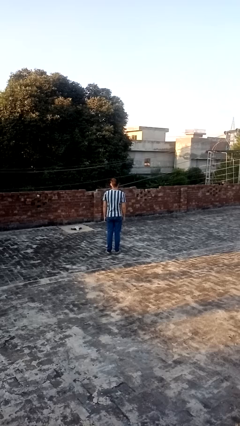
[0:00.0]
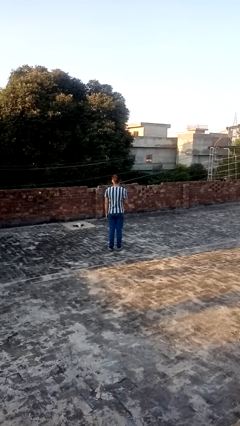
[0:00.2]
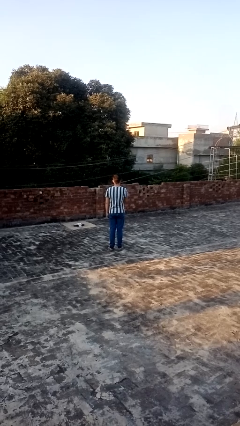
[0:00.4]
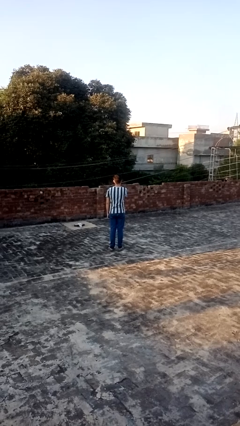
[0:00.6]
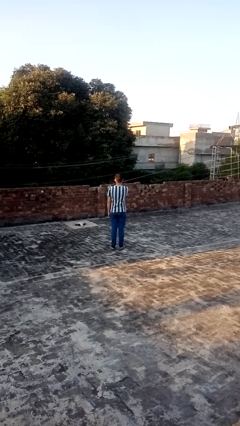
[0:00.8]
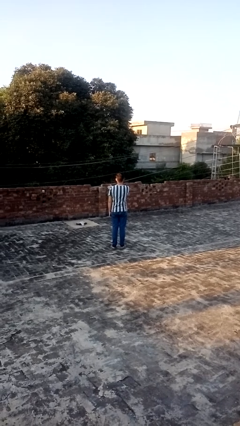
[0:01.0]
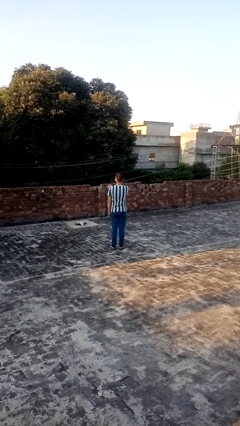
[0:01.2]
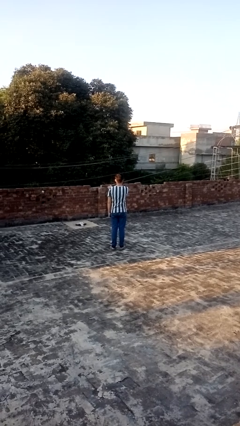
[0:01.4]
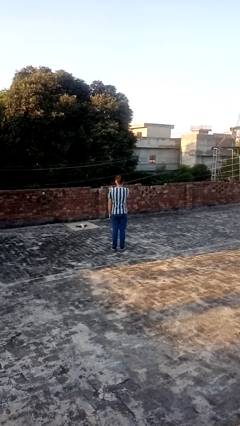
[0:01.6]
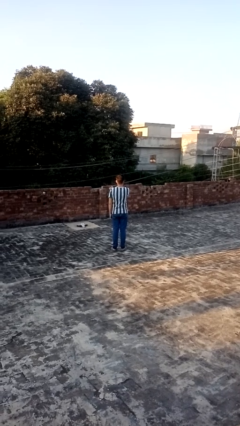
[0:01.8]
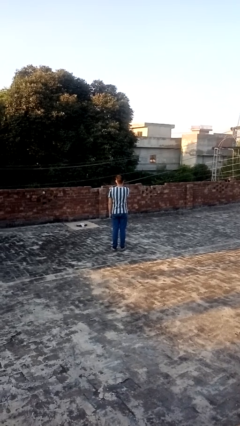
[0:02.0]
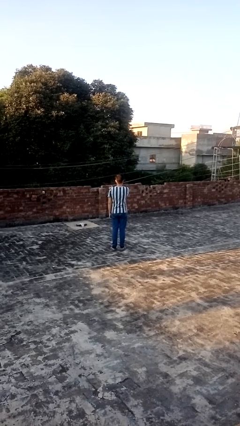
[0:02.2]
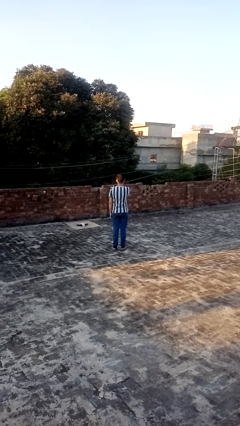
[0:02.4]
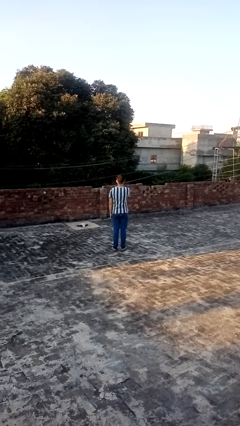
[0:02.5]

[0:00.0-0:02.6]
person gestures swipe left

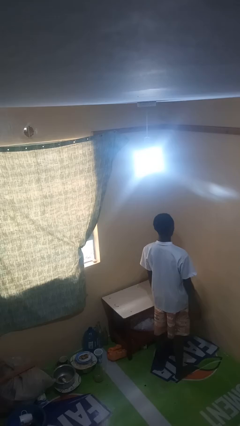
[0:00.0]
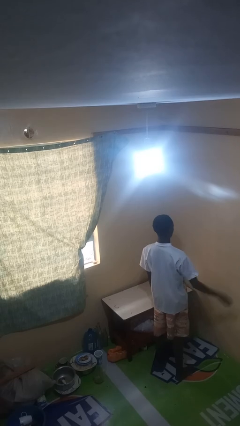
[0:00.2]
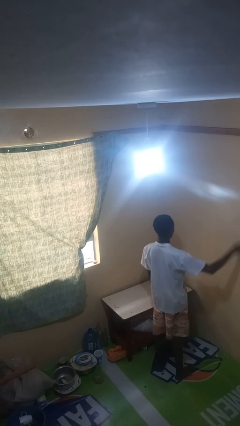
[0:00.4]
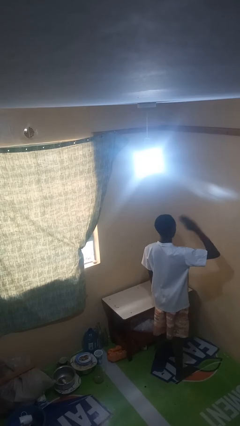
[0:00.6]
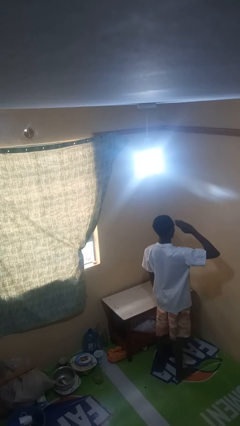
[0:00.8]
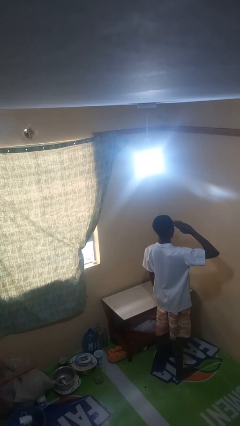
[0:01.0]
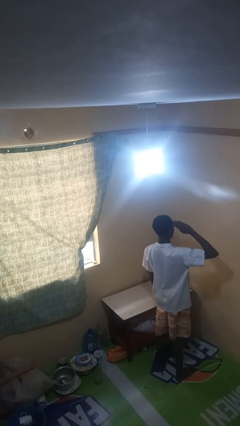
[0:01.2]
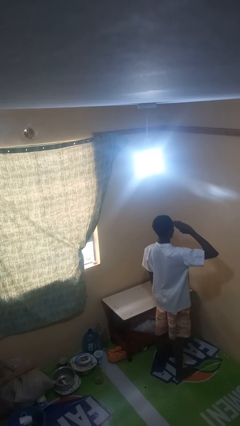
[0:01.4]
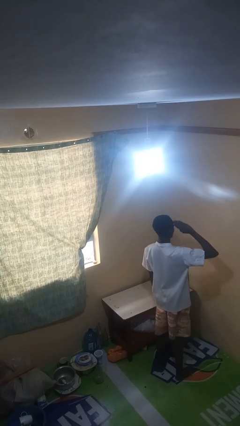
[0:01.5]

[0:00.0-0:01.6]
person salutes

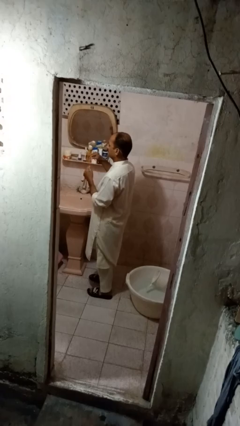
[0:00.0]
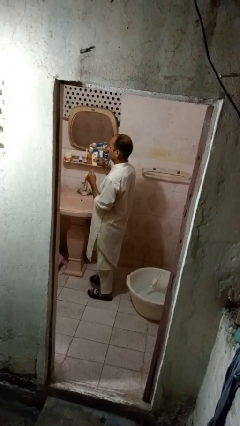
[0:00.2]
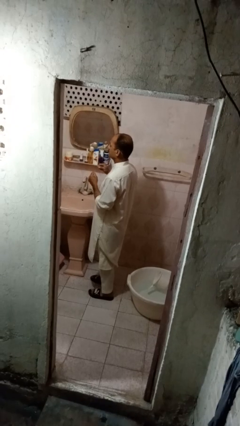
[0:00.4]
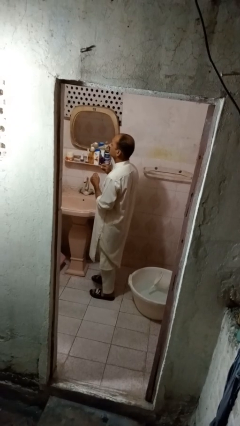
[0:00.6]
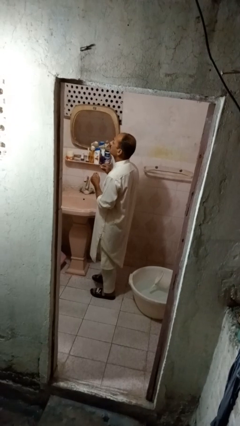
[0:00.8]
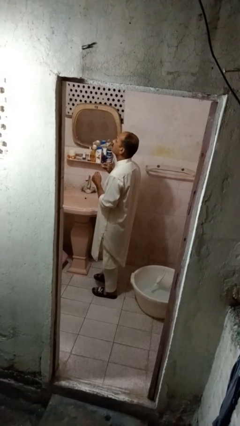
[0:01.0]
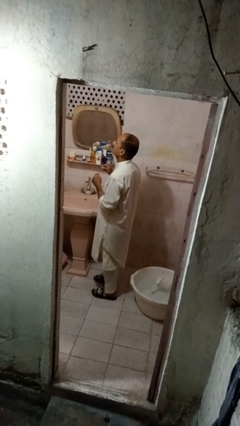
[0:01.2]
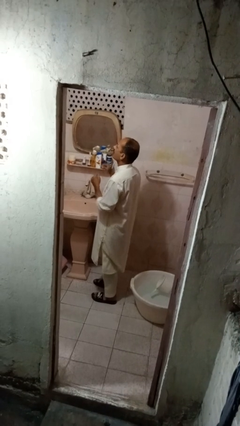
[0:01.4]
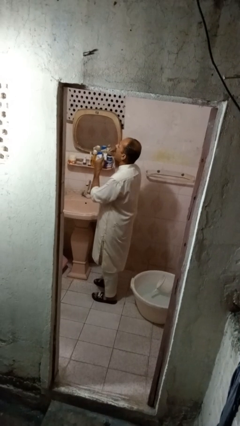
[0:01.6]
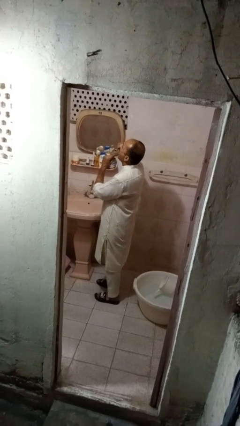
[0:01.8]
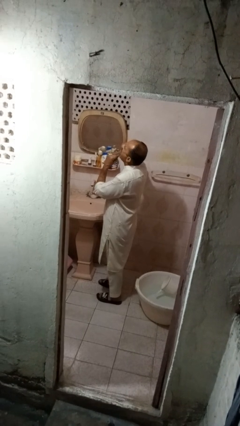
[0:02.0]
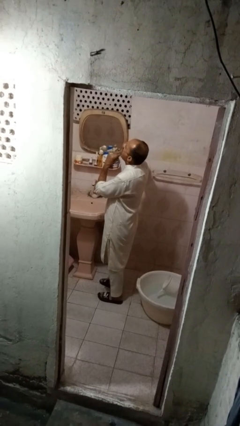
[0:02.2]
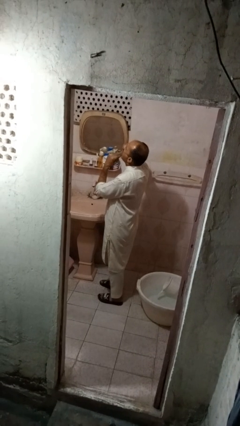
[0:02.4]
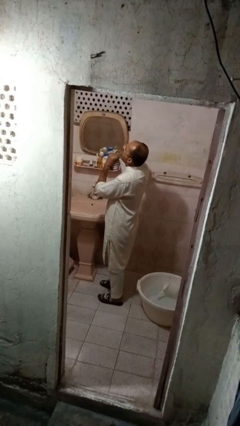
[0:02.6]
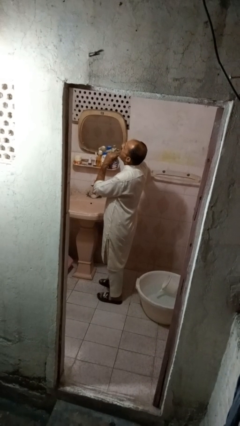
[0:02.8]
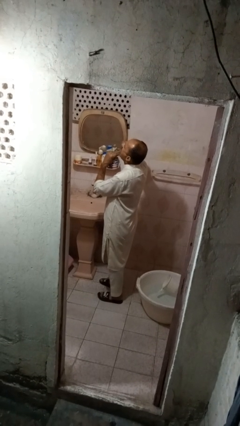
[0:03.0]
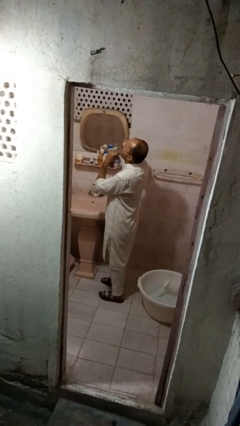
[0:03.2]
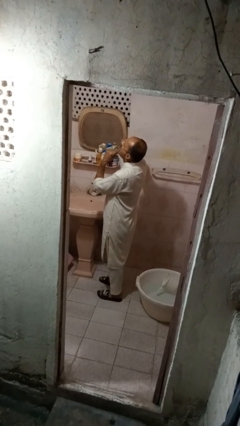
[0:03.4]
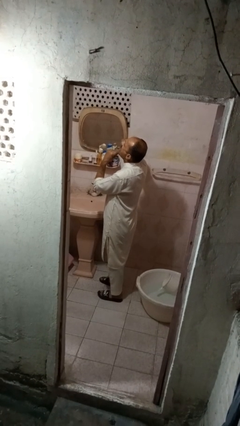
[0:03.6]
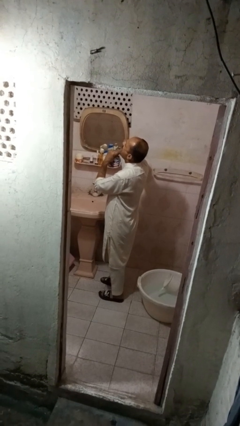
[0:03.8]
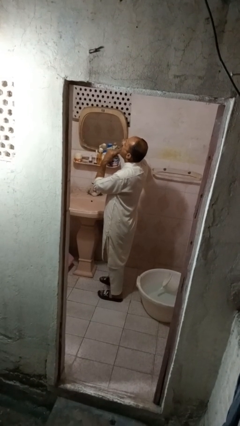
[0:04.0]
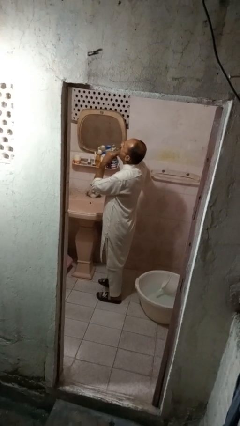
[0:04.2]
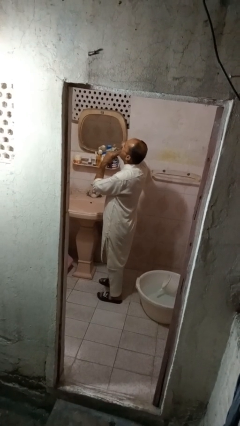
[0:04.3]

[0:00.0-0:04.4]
person flosses

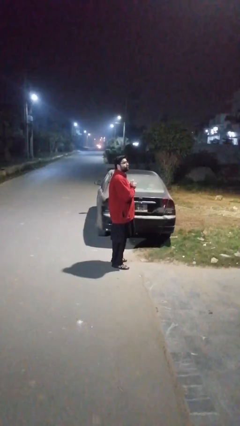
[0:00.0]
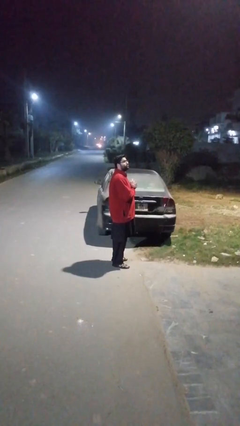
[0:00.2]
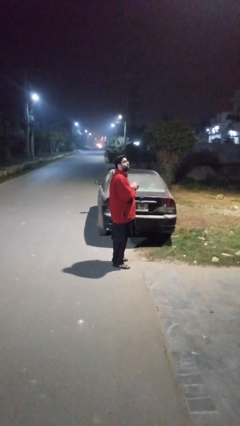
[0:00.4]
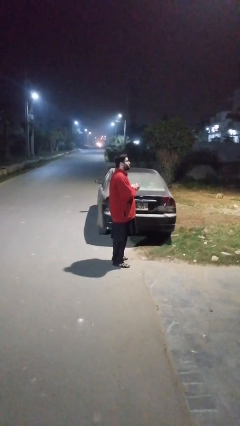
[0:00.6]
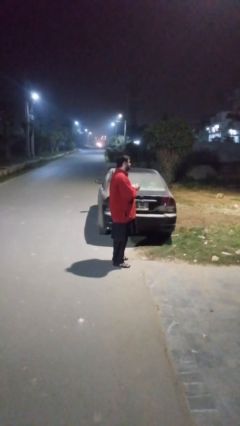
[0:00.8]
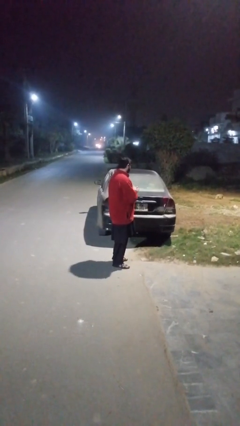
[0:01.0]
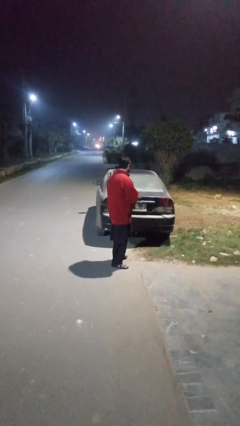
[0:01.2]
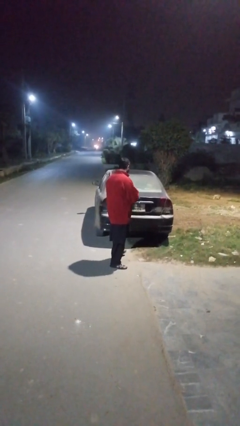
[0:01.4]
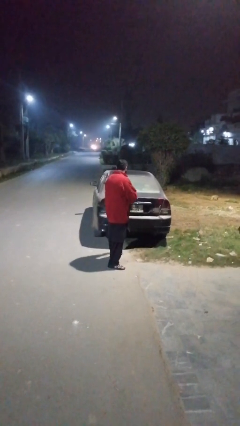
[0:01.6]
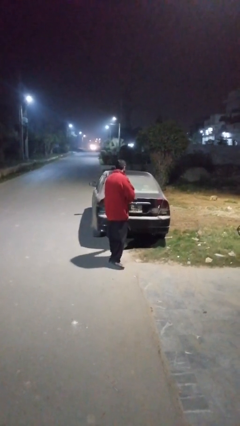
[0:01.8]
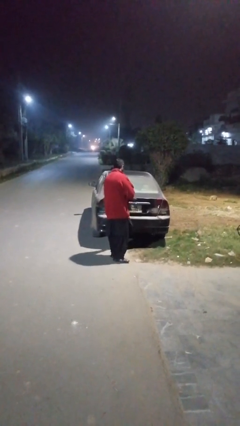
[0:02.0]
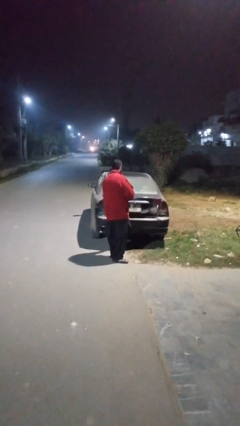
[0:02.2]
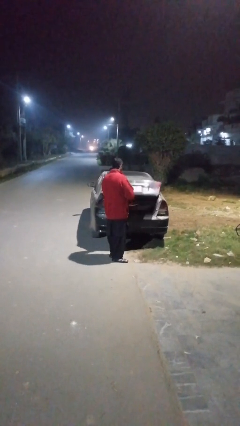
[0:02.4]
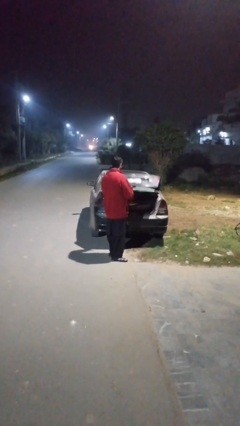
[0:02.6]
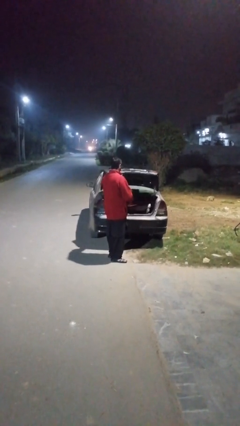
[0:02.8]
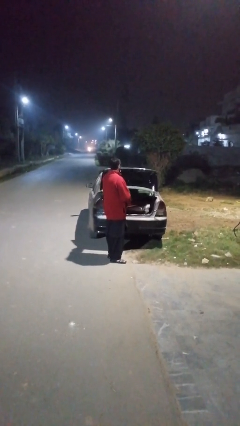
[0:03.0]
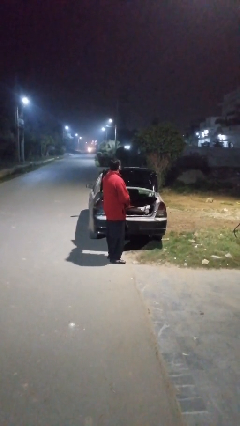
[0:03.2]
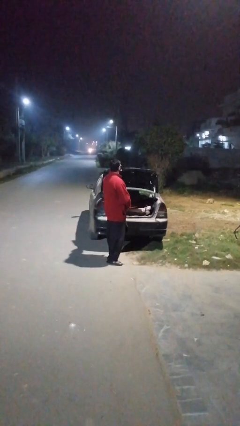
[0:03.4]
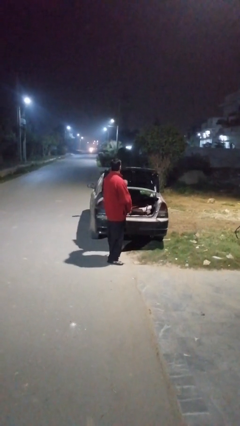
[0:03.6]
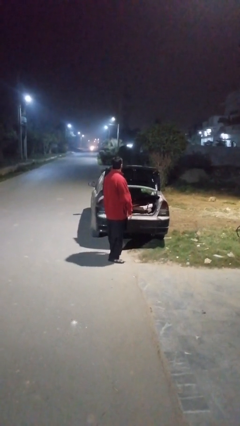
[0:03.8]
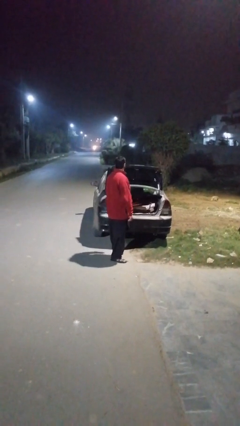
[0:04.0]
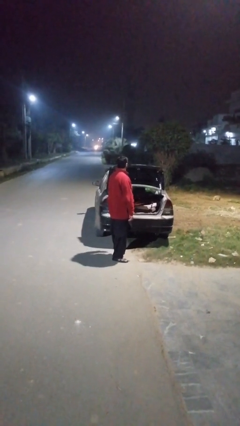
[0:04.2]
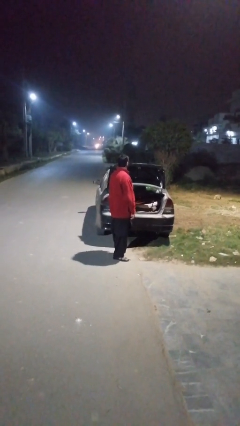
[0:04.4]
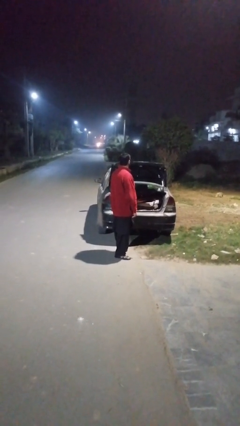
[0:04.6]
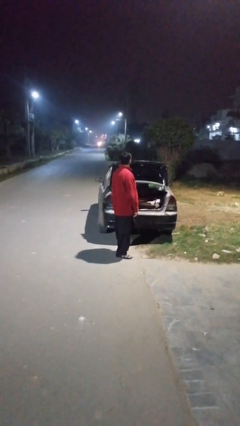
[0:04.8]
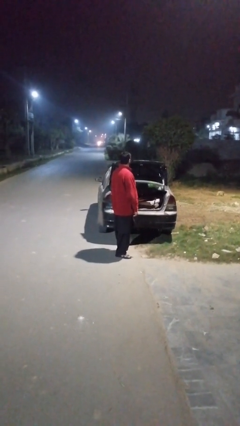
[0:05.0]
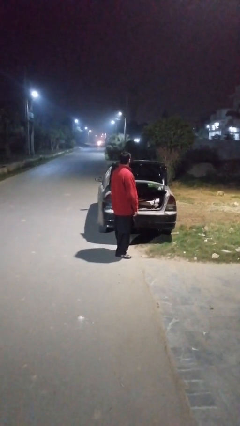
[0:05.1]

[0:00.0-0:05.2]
person opens car trunk

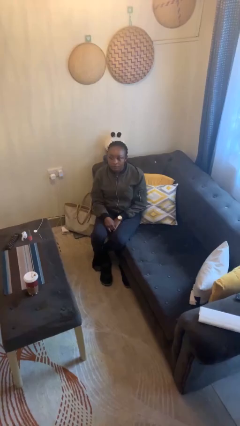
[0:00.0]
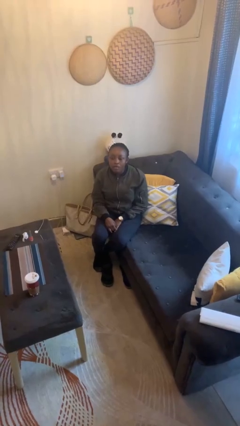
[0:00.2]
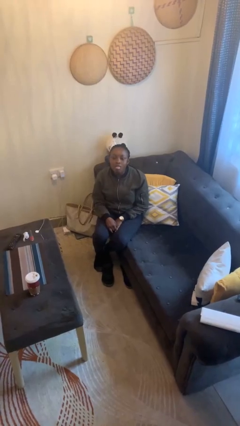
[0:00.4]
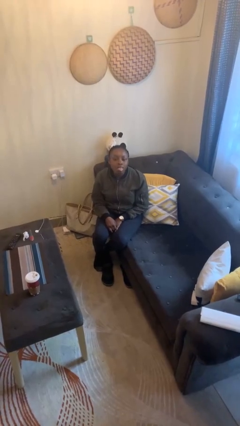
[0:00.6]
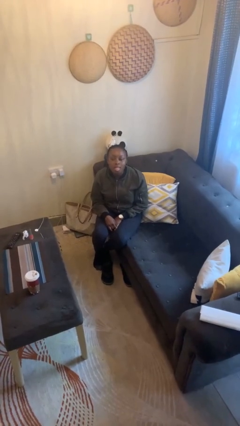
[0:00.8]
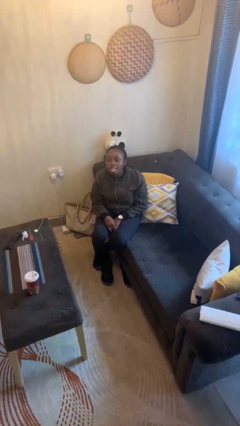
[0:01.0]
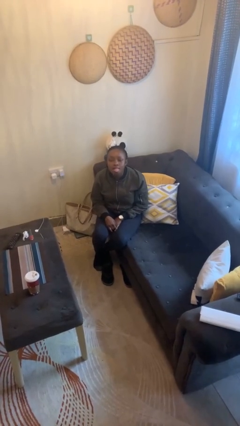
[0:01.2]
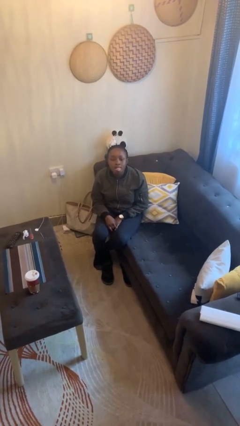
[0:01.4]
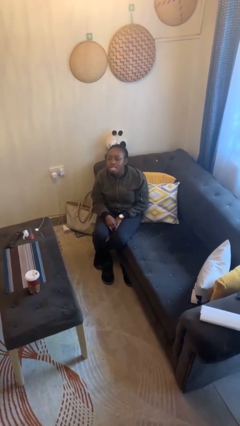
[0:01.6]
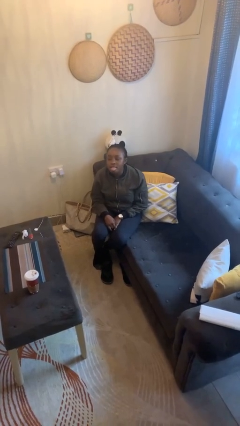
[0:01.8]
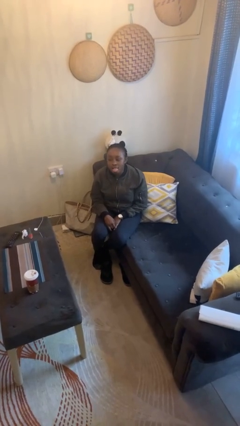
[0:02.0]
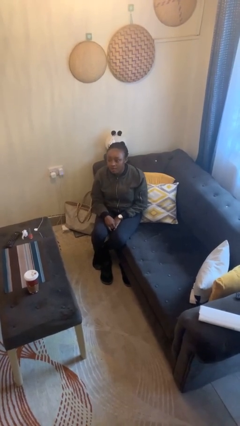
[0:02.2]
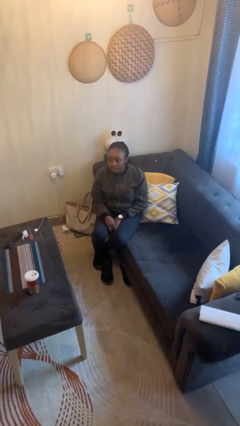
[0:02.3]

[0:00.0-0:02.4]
person sticks out tongue

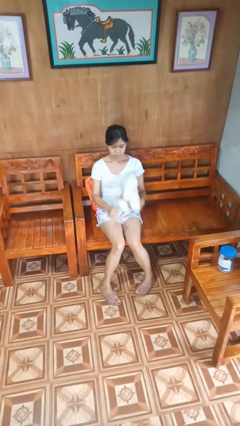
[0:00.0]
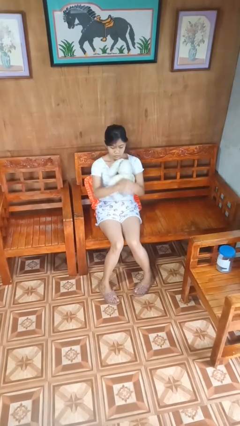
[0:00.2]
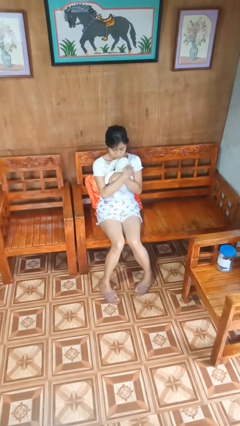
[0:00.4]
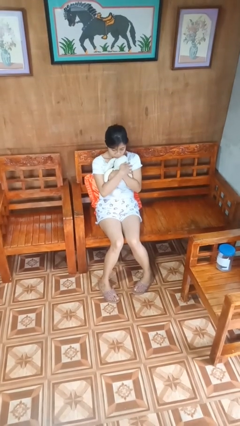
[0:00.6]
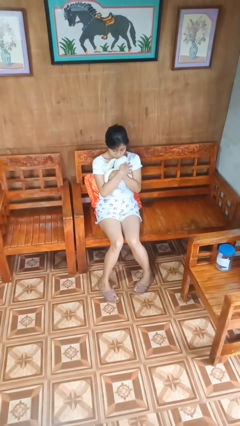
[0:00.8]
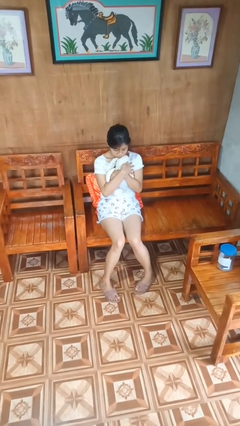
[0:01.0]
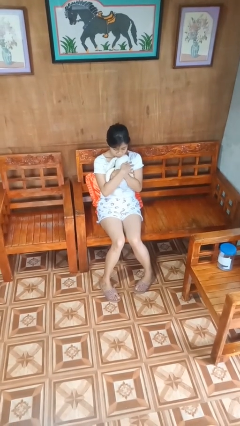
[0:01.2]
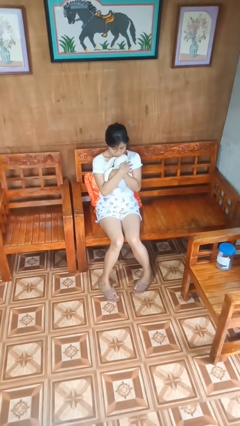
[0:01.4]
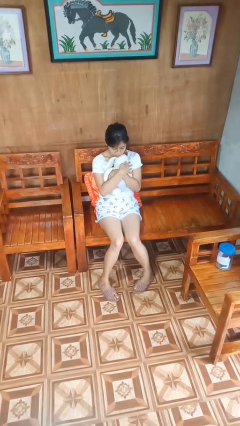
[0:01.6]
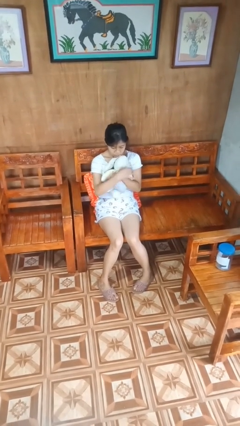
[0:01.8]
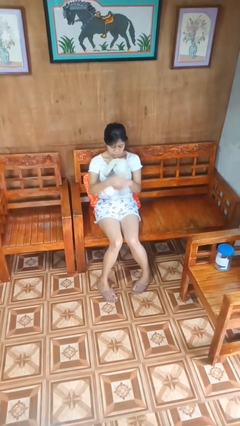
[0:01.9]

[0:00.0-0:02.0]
person hugs stuffed animal
